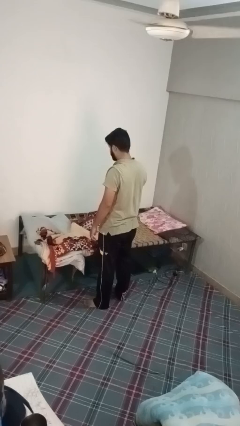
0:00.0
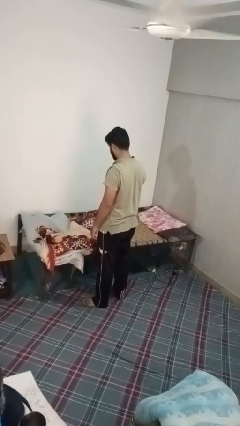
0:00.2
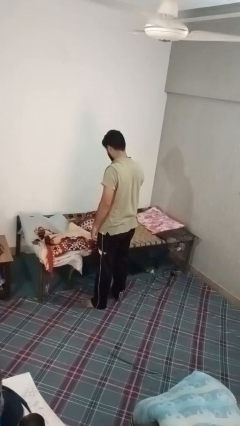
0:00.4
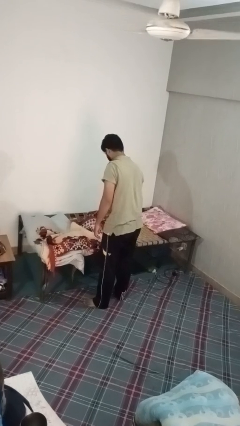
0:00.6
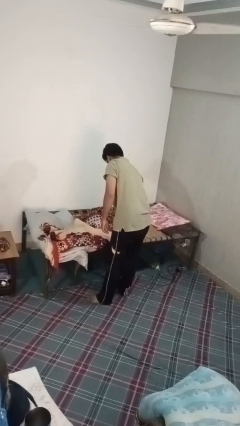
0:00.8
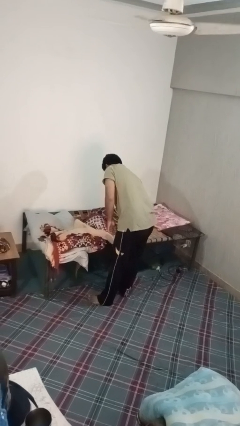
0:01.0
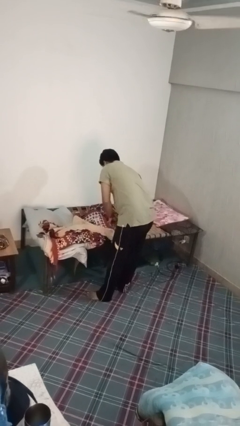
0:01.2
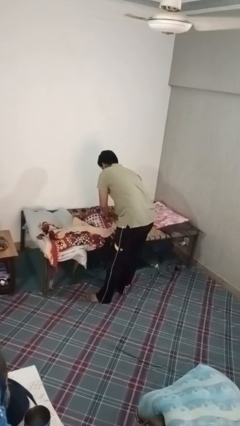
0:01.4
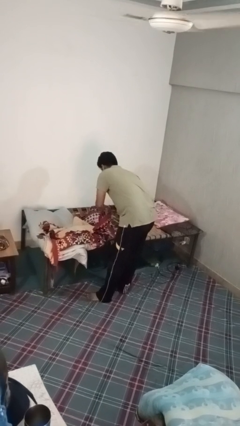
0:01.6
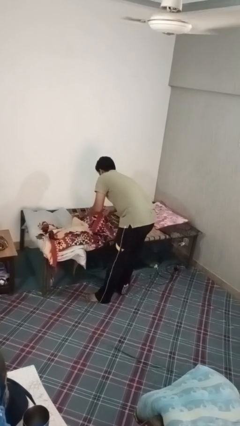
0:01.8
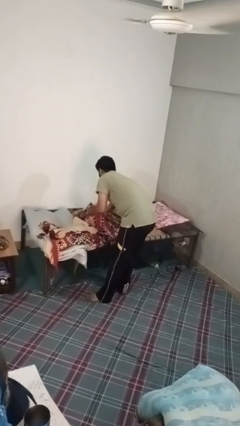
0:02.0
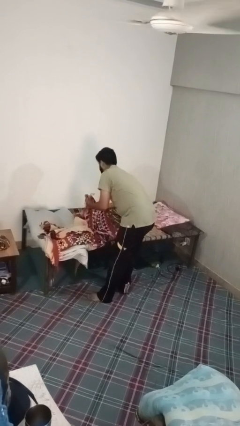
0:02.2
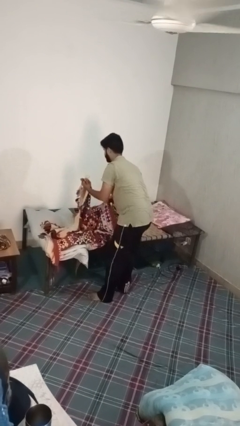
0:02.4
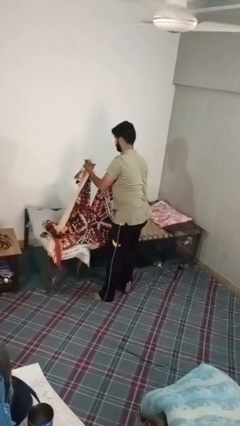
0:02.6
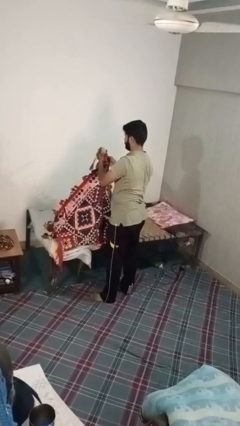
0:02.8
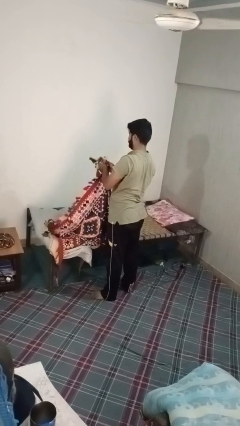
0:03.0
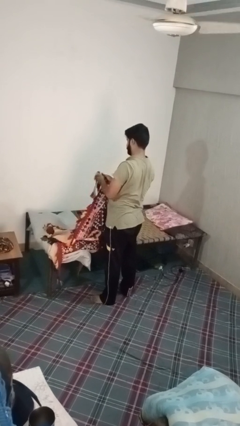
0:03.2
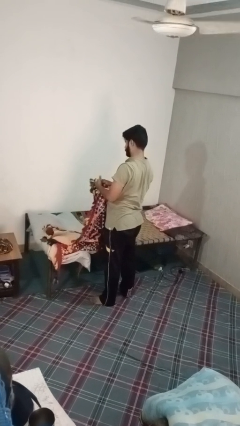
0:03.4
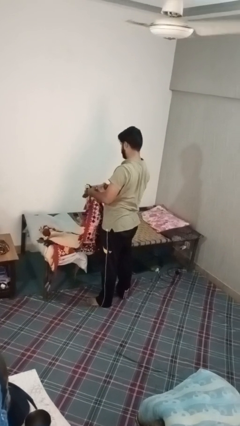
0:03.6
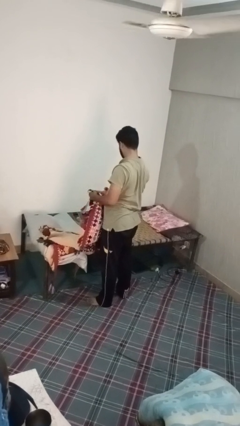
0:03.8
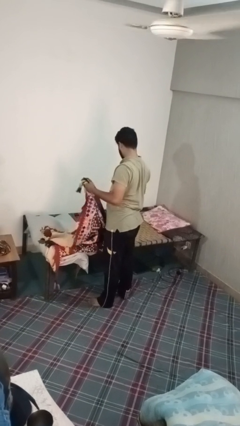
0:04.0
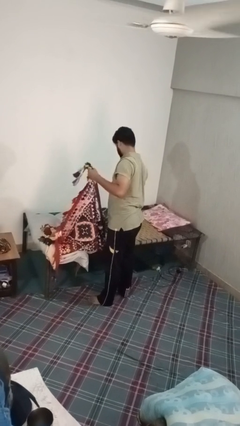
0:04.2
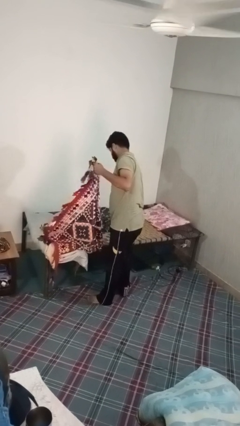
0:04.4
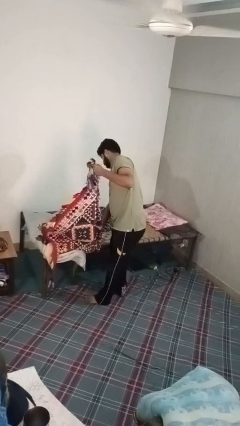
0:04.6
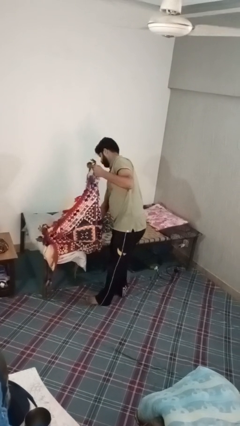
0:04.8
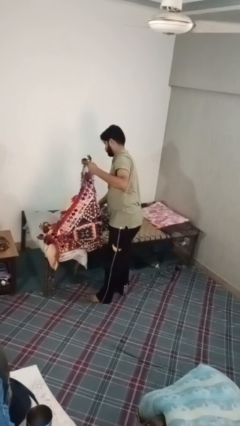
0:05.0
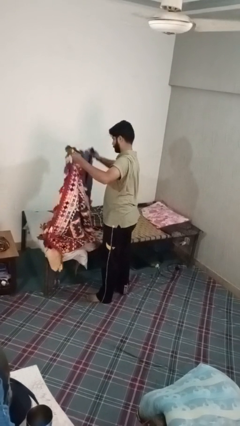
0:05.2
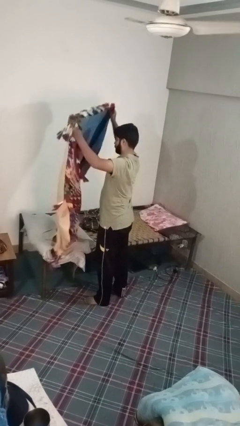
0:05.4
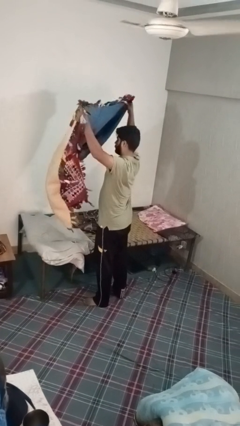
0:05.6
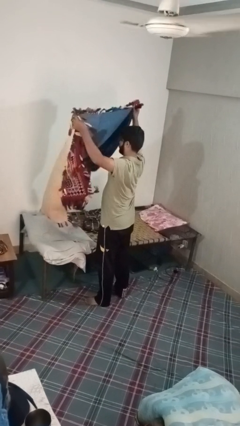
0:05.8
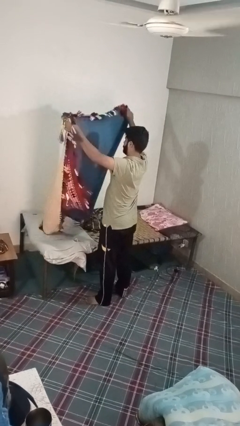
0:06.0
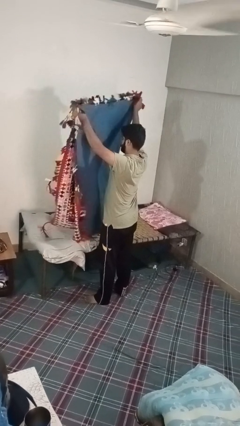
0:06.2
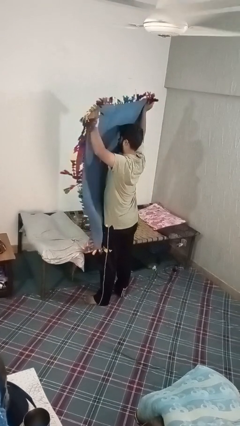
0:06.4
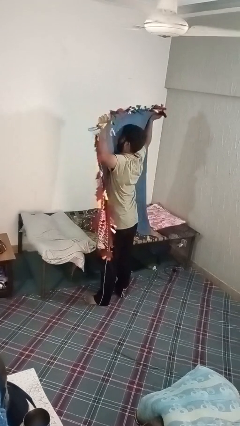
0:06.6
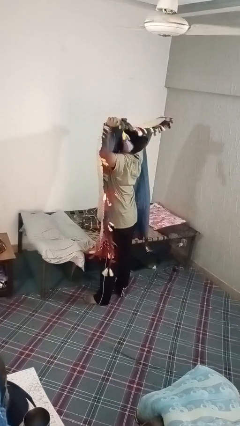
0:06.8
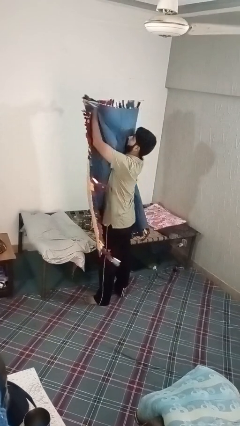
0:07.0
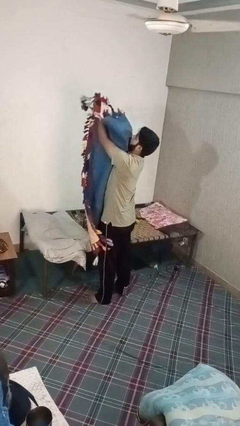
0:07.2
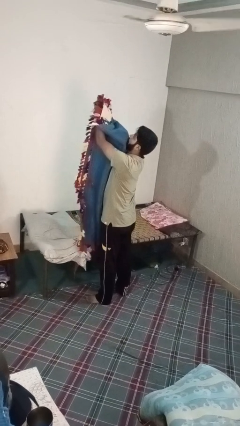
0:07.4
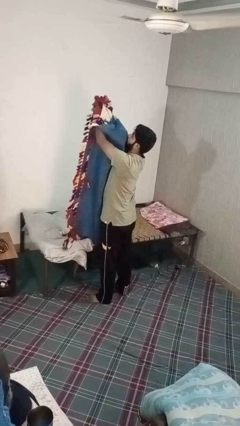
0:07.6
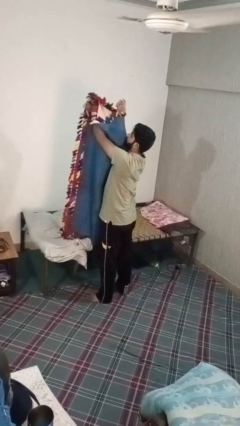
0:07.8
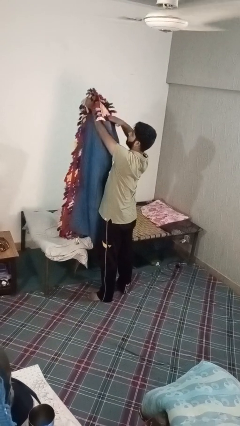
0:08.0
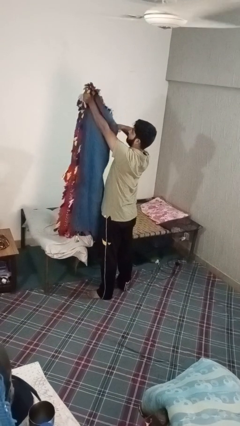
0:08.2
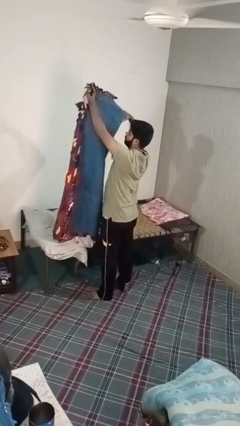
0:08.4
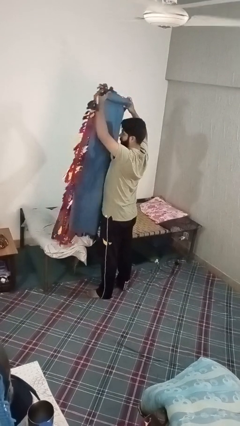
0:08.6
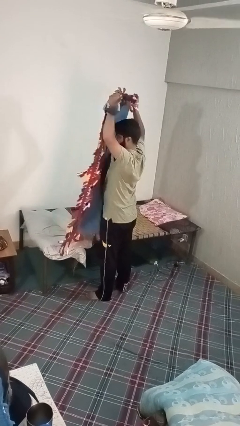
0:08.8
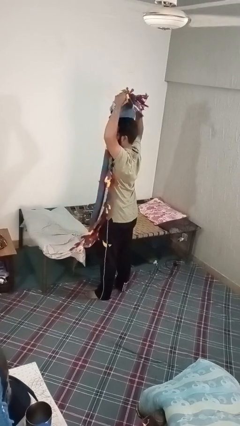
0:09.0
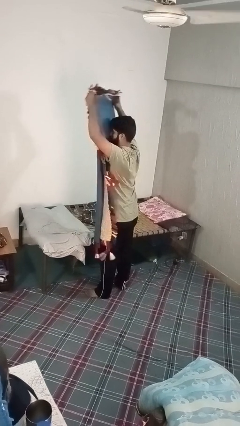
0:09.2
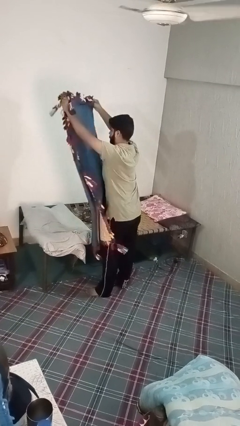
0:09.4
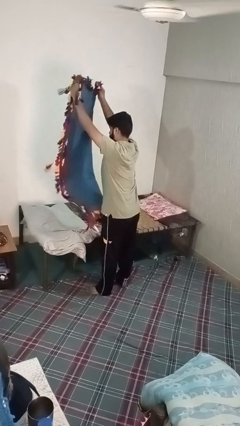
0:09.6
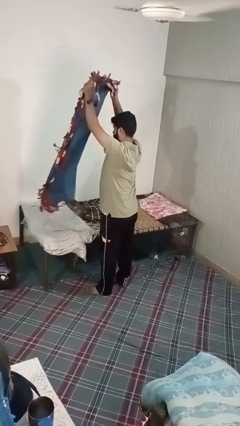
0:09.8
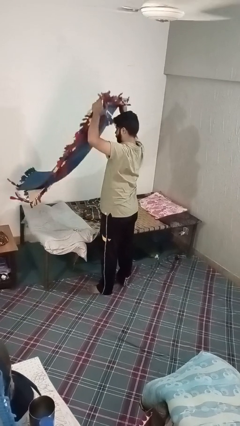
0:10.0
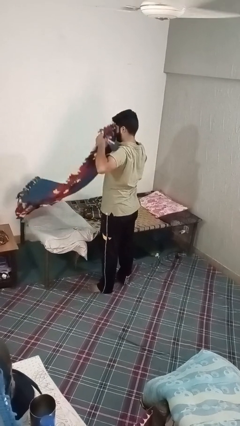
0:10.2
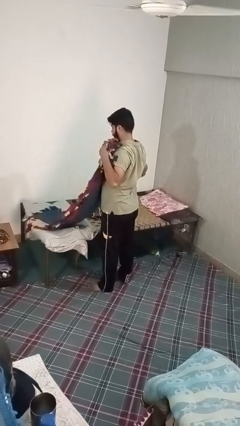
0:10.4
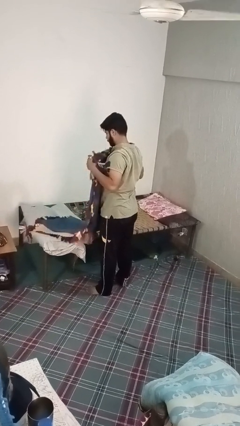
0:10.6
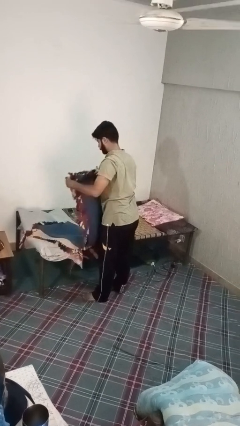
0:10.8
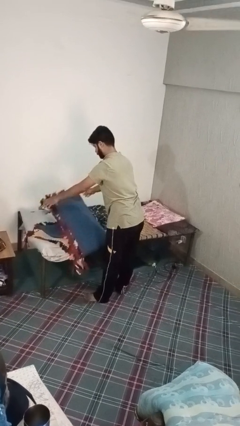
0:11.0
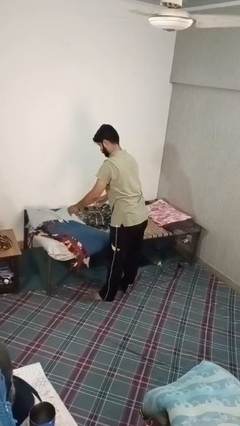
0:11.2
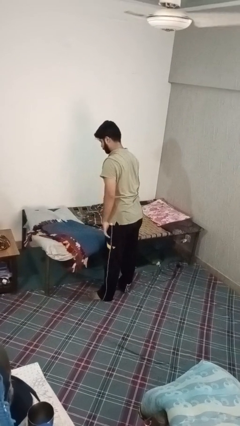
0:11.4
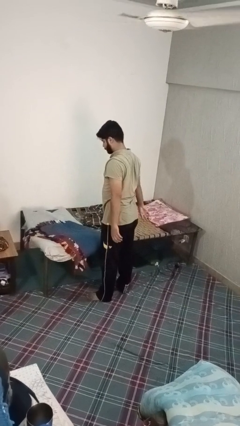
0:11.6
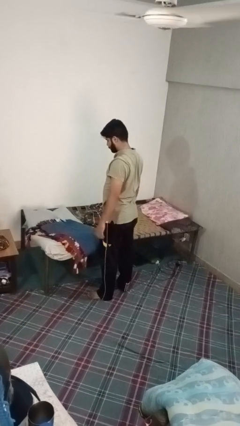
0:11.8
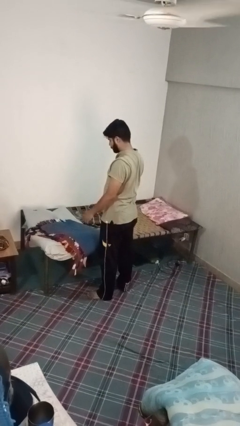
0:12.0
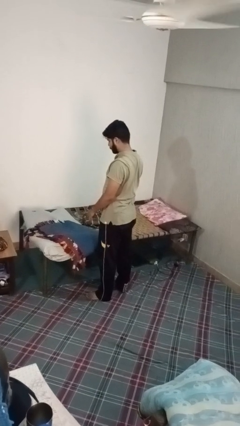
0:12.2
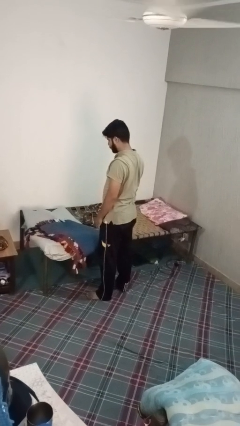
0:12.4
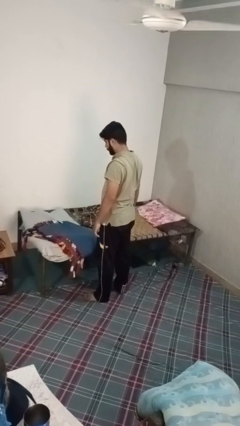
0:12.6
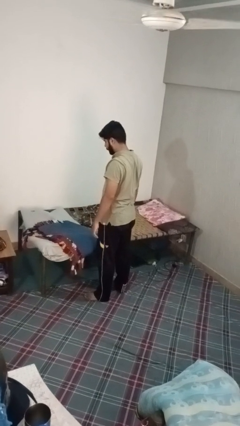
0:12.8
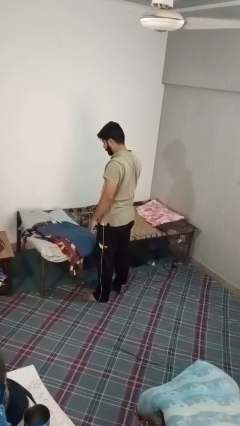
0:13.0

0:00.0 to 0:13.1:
person folds blanket

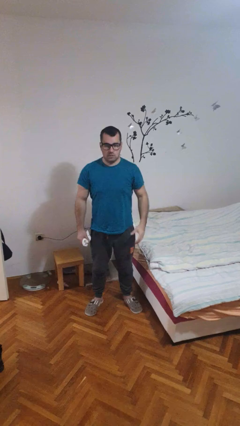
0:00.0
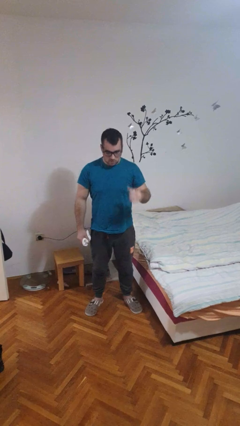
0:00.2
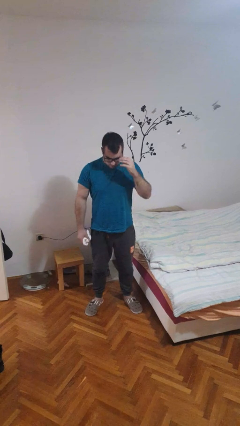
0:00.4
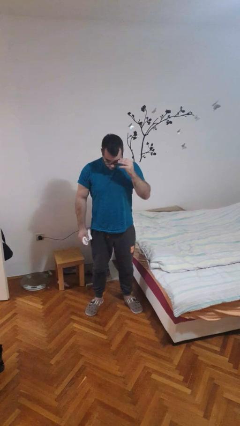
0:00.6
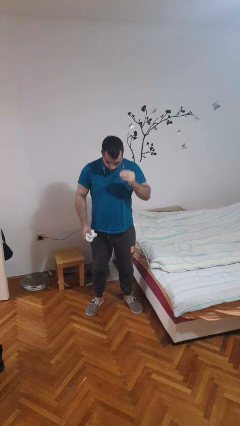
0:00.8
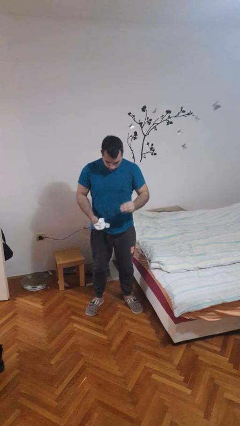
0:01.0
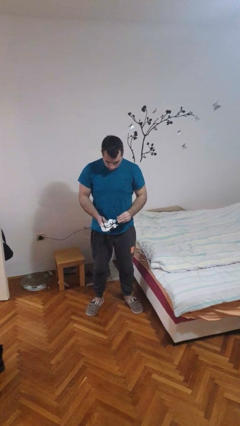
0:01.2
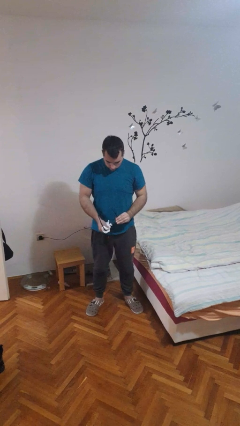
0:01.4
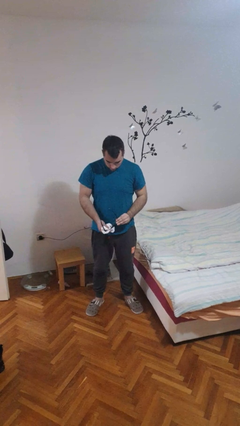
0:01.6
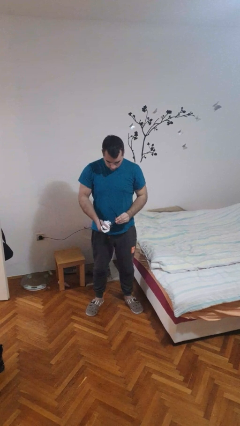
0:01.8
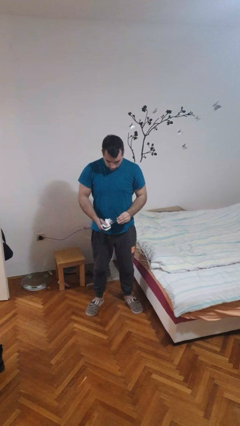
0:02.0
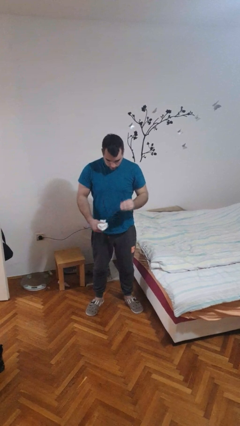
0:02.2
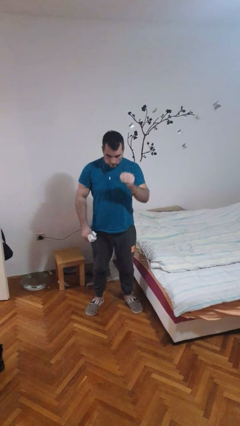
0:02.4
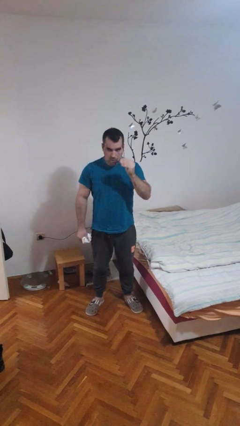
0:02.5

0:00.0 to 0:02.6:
person cleans eyeglasses

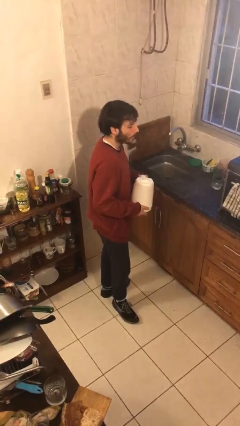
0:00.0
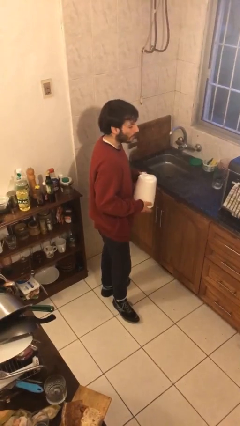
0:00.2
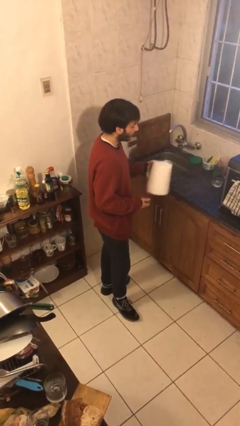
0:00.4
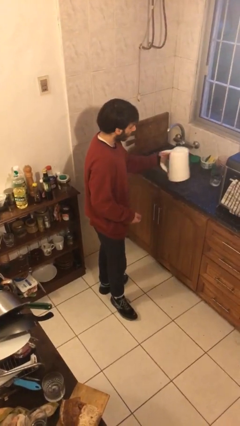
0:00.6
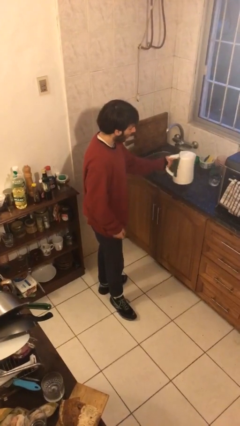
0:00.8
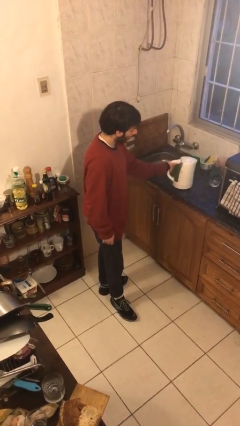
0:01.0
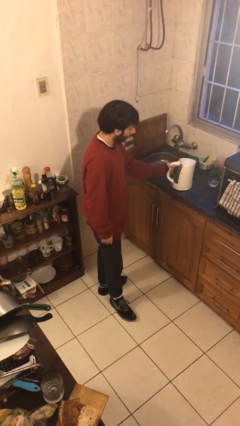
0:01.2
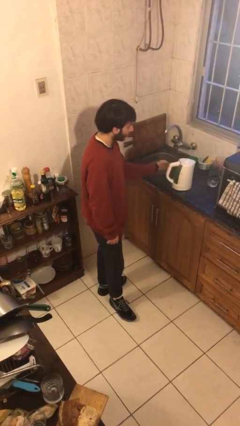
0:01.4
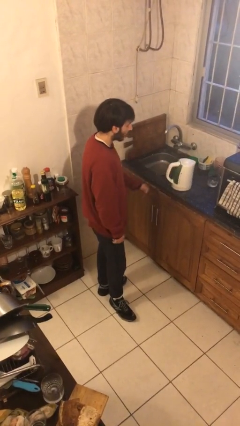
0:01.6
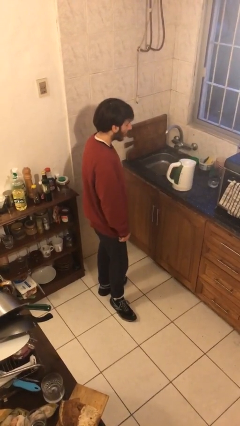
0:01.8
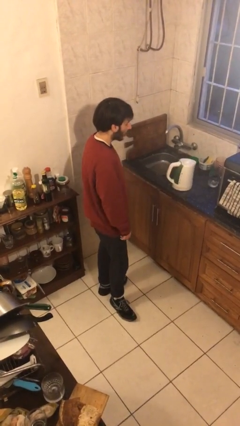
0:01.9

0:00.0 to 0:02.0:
person puts down object on countertop

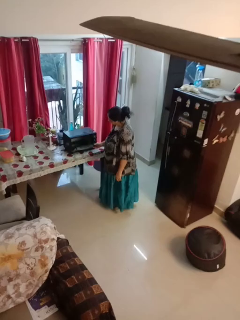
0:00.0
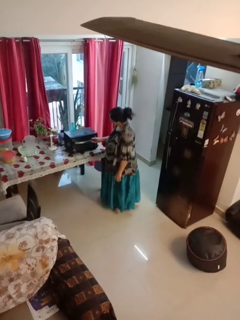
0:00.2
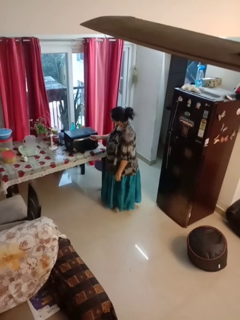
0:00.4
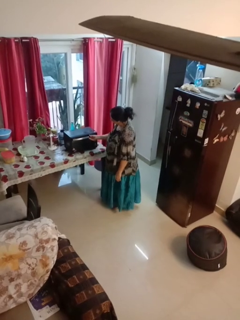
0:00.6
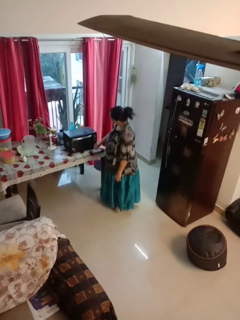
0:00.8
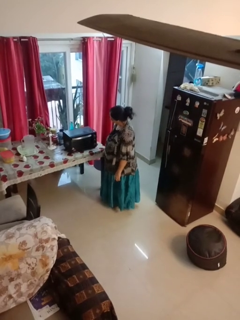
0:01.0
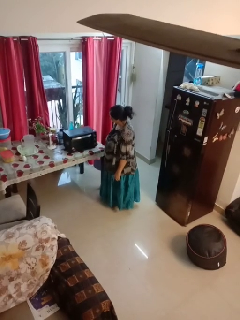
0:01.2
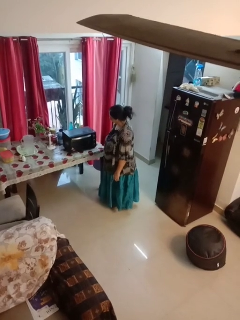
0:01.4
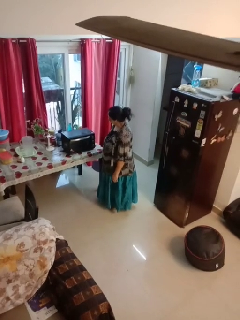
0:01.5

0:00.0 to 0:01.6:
person closes microwave
